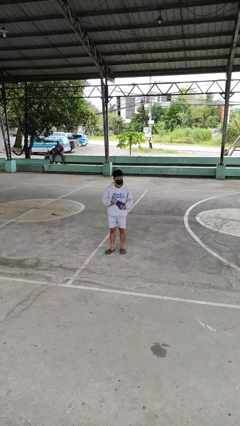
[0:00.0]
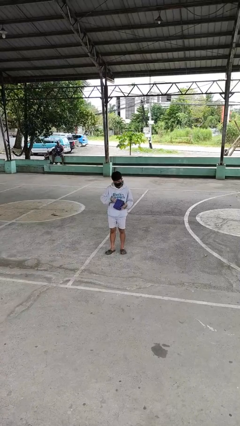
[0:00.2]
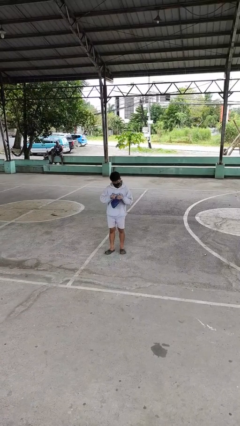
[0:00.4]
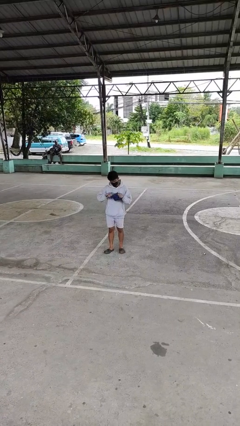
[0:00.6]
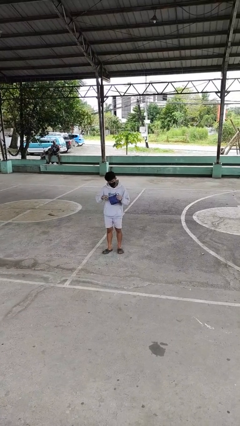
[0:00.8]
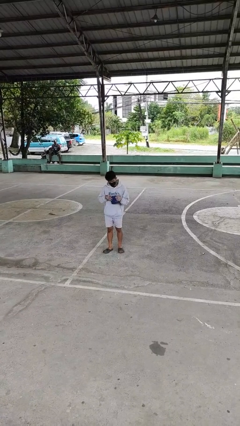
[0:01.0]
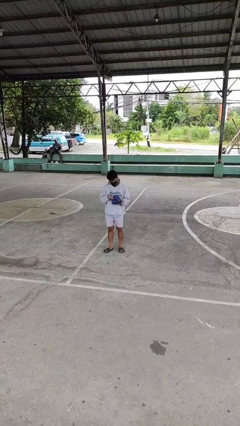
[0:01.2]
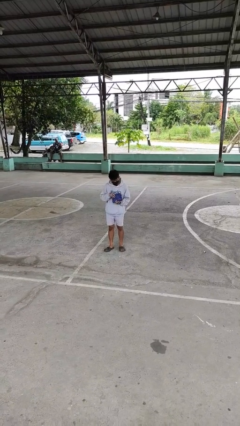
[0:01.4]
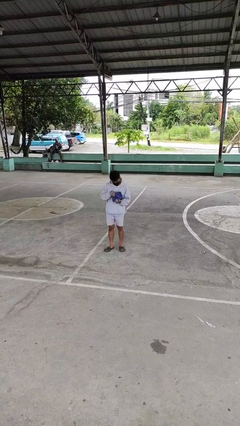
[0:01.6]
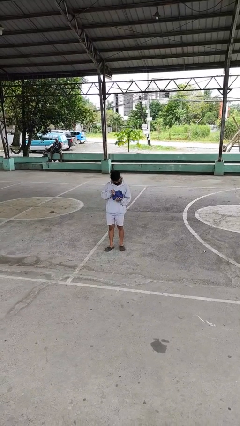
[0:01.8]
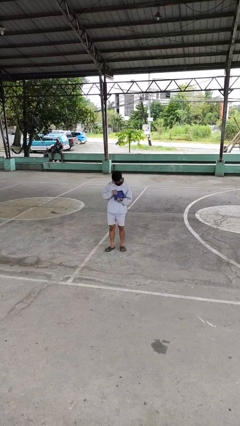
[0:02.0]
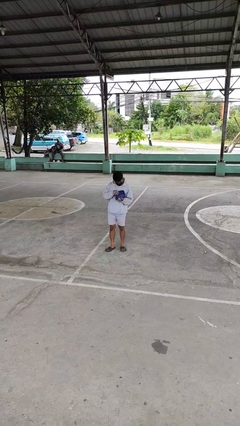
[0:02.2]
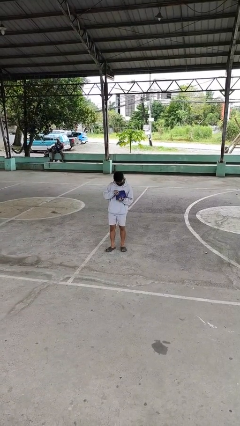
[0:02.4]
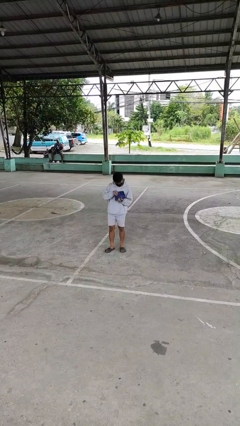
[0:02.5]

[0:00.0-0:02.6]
person searches in purse

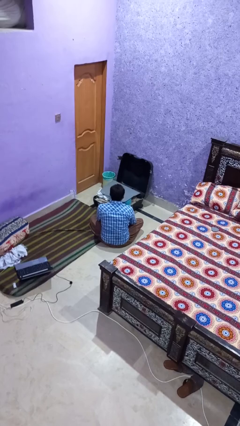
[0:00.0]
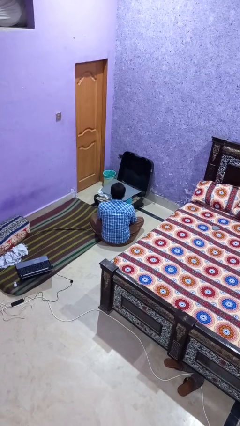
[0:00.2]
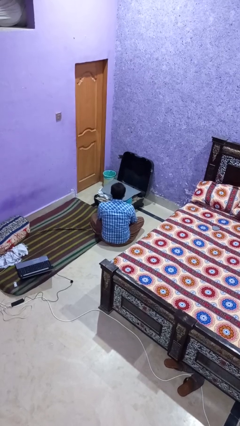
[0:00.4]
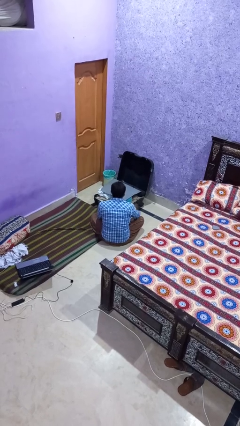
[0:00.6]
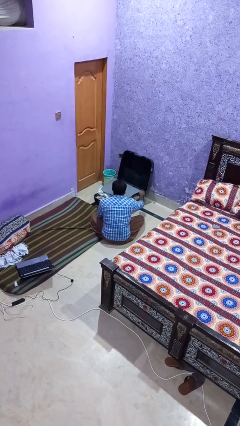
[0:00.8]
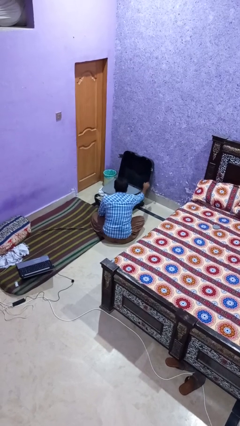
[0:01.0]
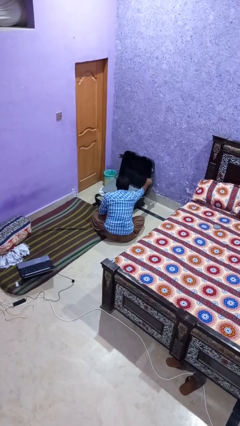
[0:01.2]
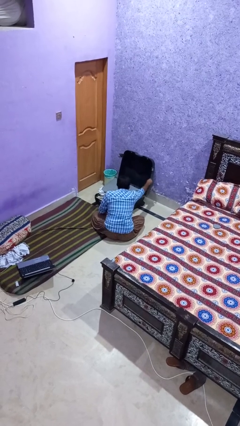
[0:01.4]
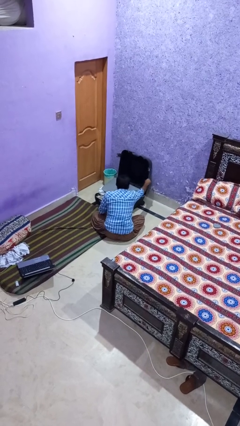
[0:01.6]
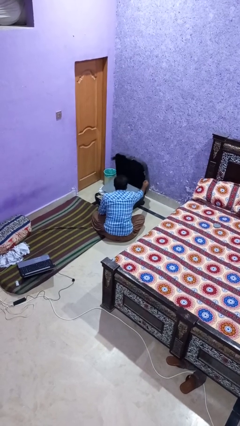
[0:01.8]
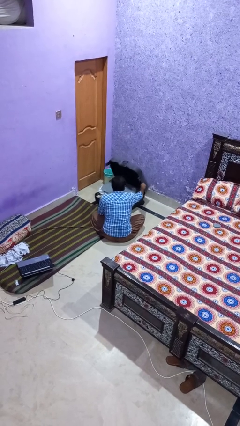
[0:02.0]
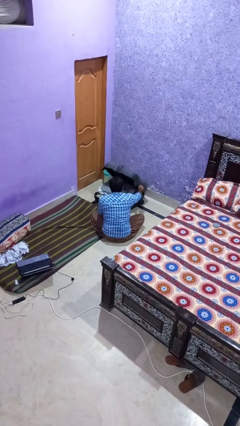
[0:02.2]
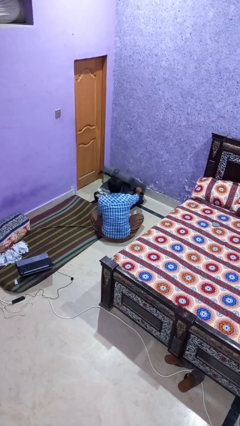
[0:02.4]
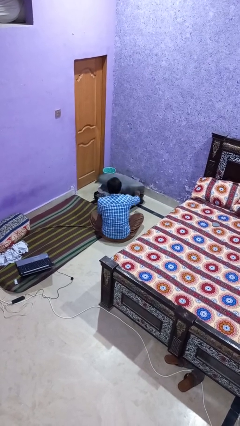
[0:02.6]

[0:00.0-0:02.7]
person closes suitcase

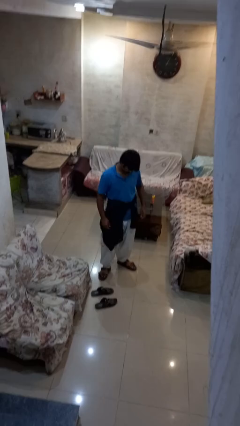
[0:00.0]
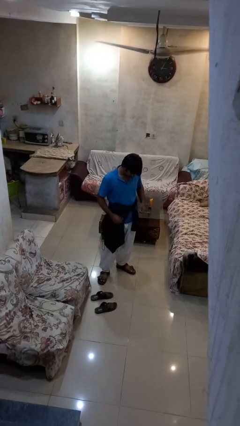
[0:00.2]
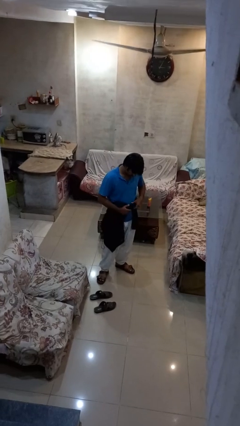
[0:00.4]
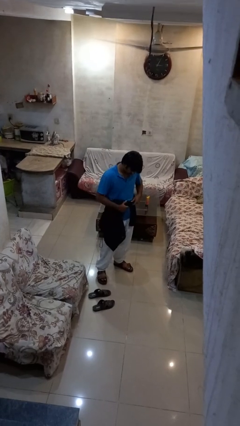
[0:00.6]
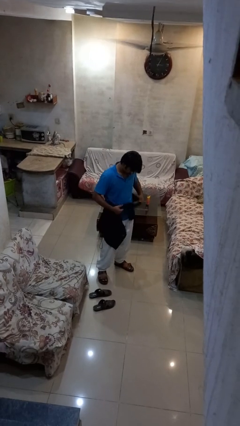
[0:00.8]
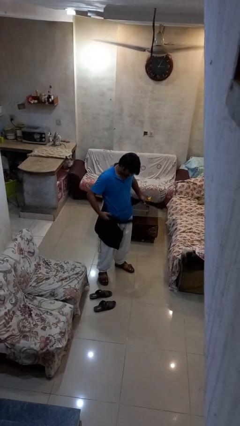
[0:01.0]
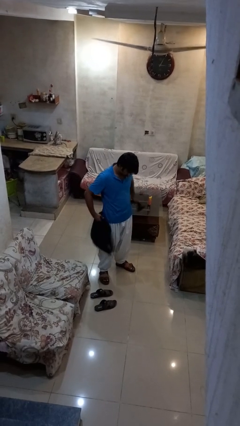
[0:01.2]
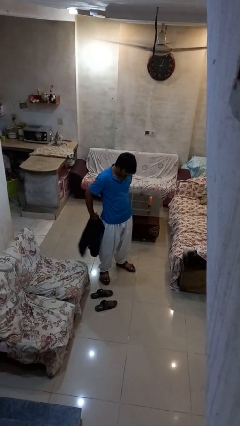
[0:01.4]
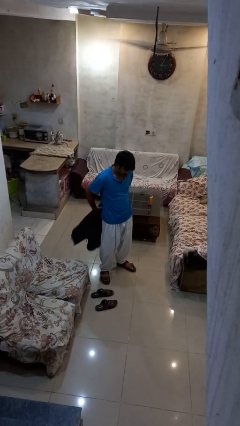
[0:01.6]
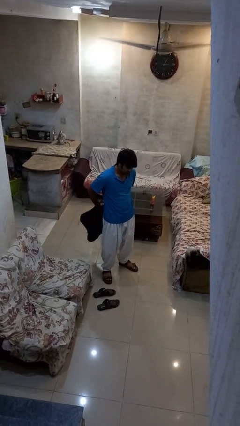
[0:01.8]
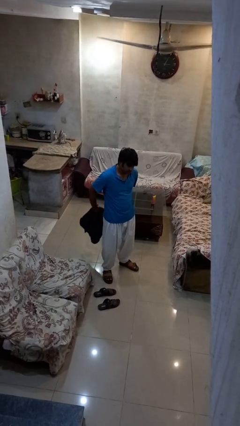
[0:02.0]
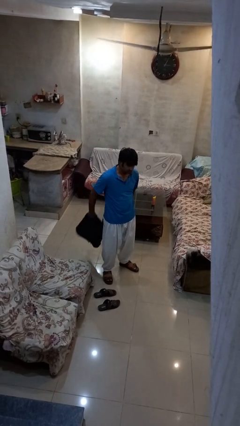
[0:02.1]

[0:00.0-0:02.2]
person unties jacket around waist

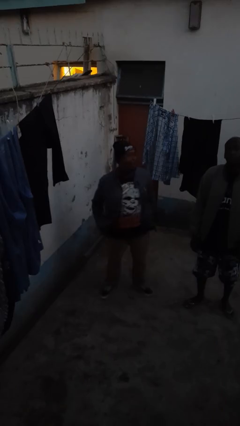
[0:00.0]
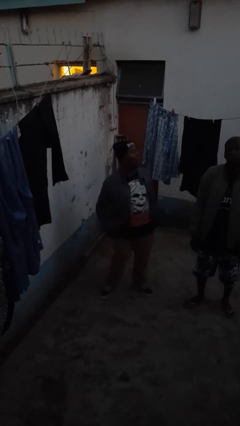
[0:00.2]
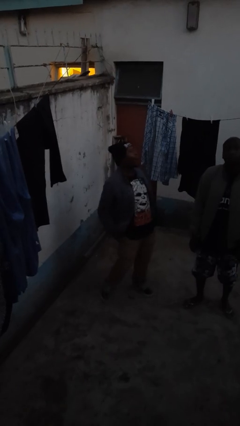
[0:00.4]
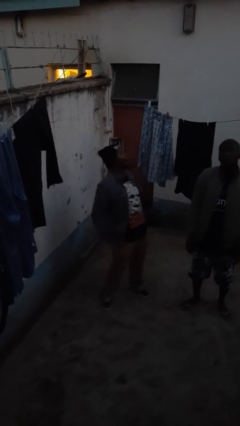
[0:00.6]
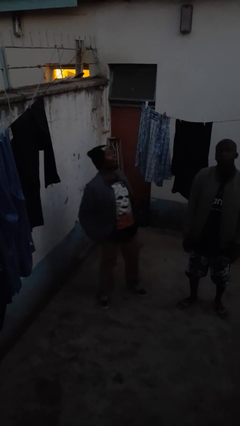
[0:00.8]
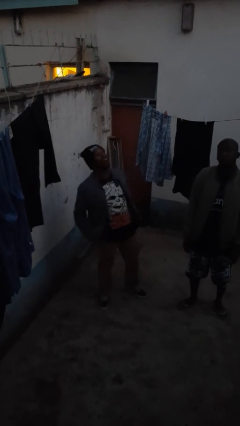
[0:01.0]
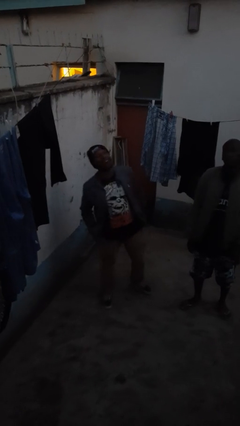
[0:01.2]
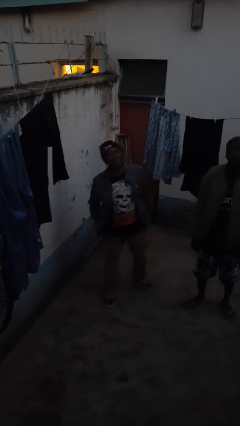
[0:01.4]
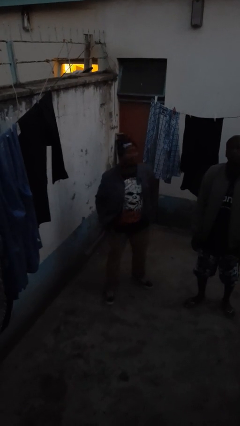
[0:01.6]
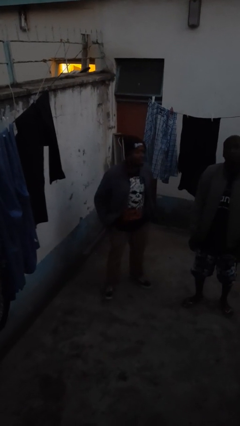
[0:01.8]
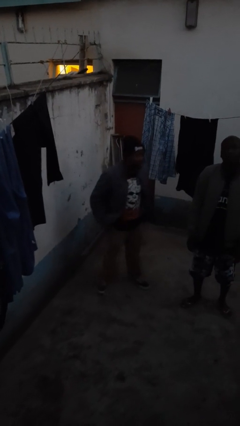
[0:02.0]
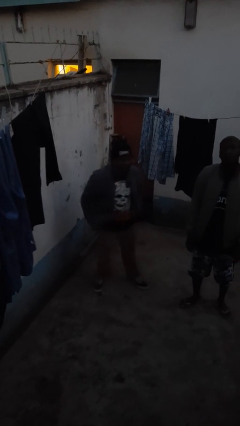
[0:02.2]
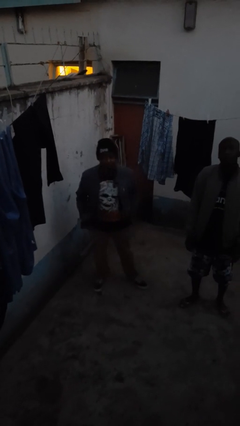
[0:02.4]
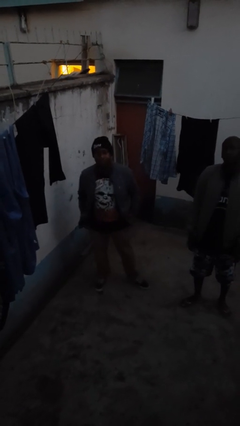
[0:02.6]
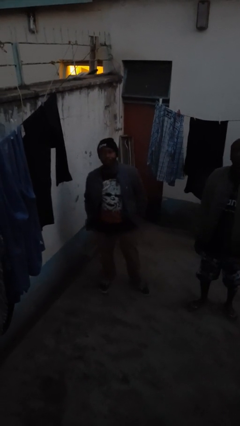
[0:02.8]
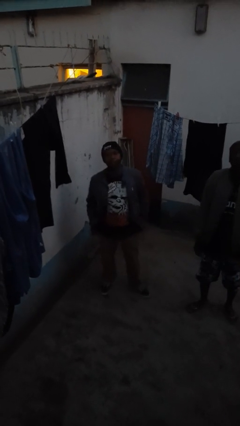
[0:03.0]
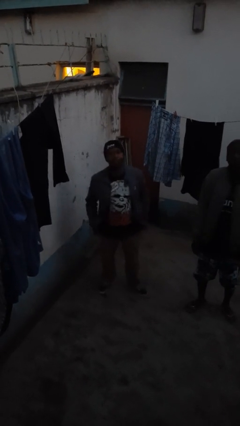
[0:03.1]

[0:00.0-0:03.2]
person laughs with person

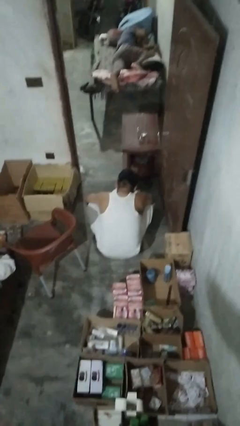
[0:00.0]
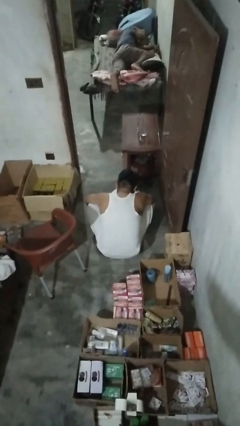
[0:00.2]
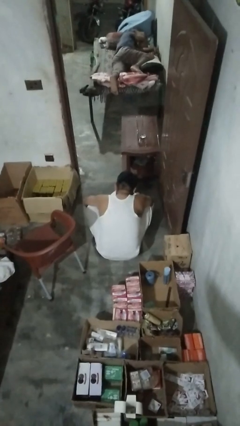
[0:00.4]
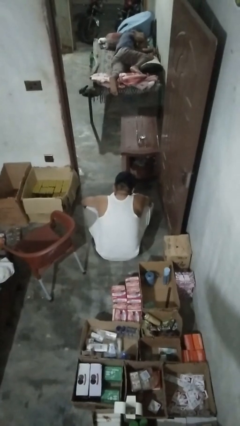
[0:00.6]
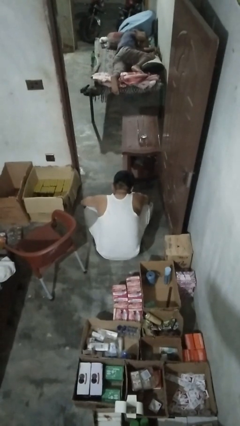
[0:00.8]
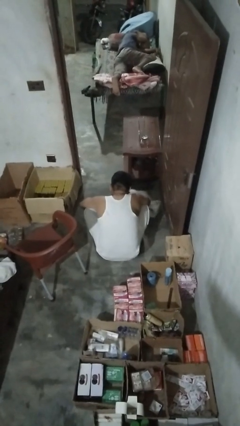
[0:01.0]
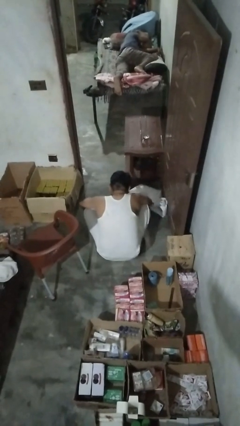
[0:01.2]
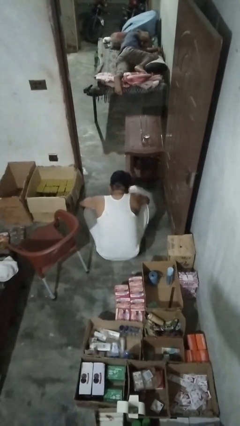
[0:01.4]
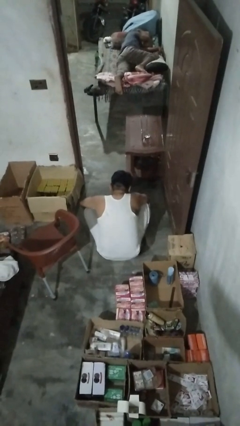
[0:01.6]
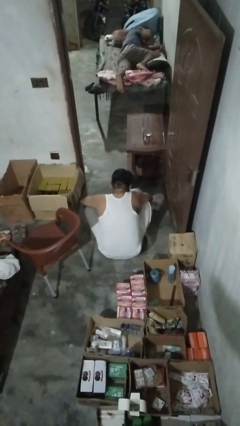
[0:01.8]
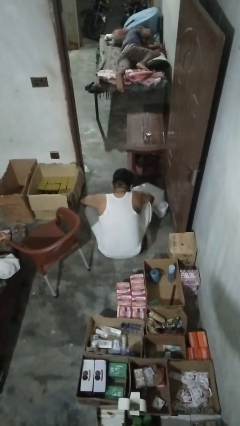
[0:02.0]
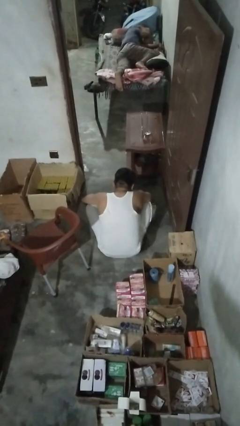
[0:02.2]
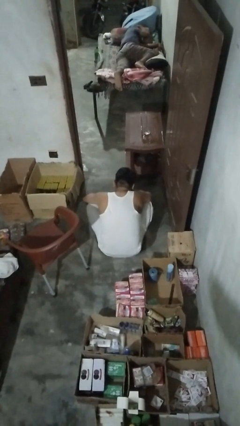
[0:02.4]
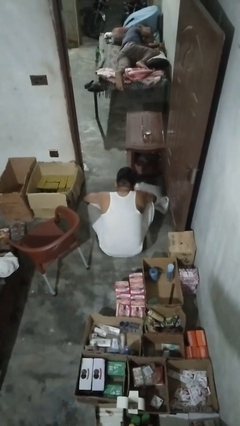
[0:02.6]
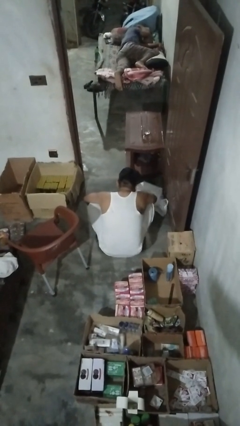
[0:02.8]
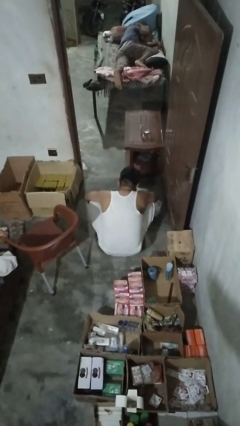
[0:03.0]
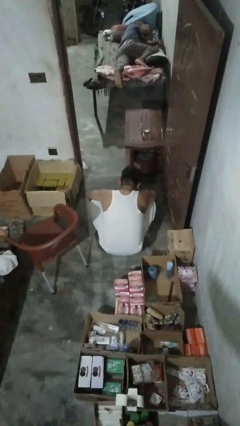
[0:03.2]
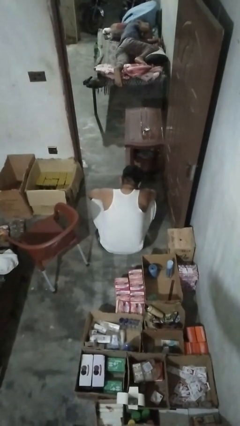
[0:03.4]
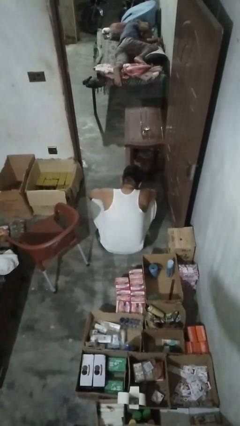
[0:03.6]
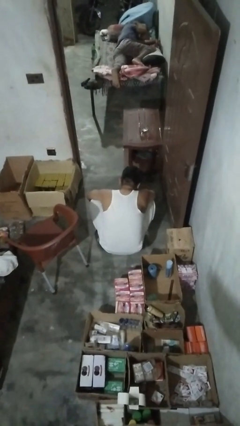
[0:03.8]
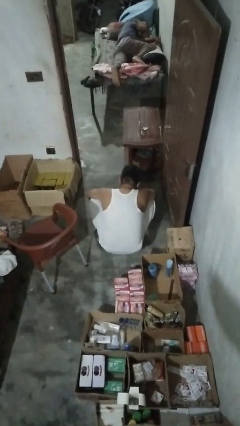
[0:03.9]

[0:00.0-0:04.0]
person mops

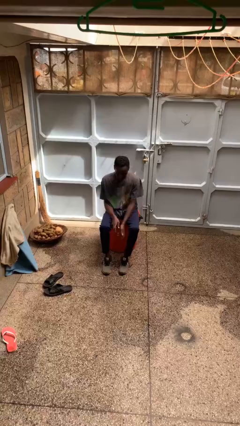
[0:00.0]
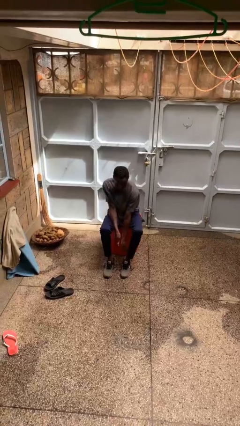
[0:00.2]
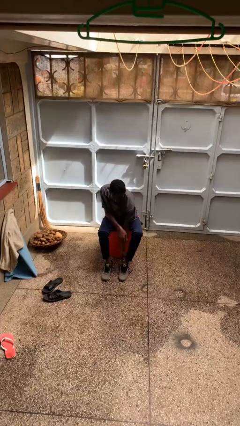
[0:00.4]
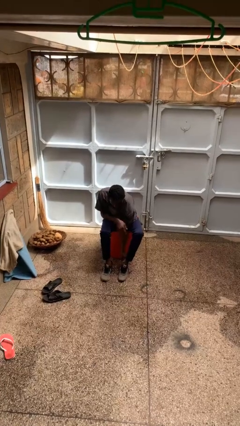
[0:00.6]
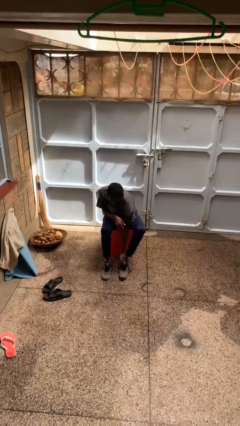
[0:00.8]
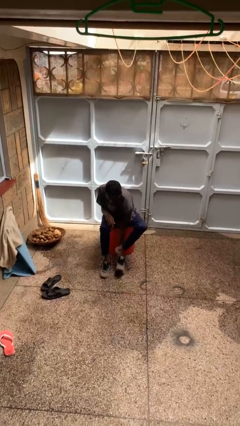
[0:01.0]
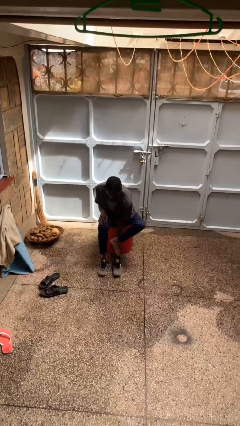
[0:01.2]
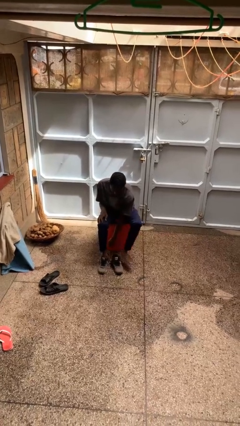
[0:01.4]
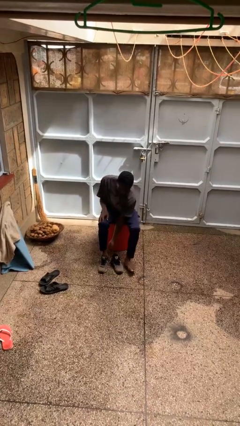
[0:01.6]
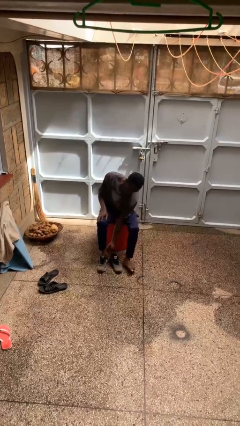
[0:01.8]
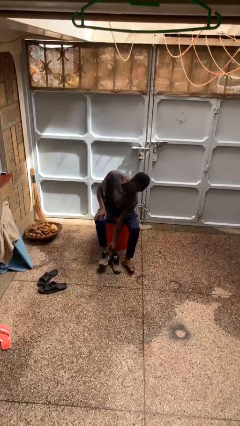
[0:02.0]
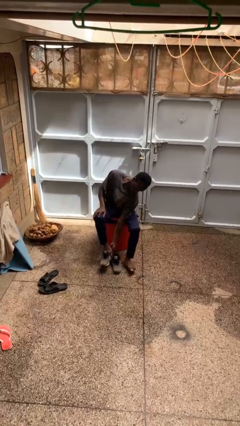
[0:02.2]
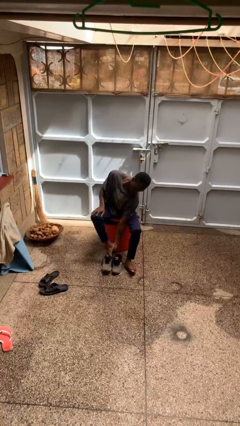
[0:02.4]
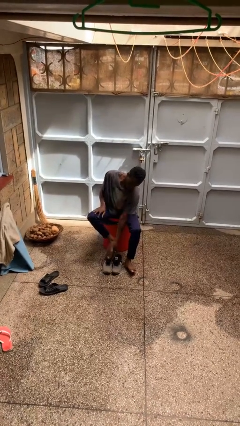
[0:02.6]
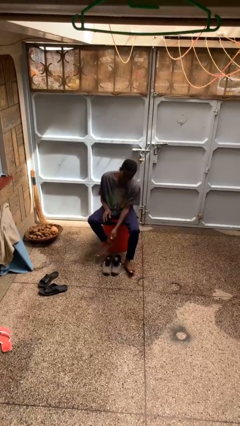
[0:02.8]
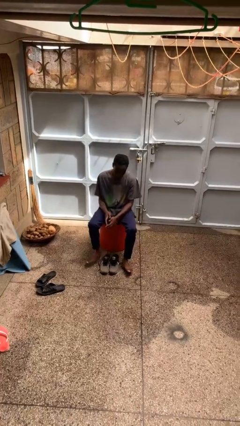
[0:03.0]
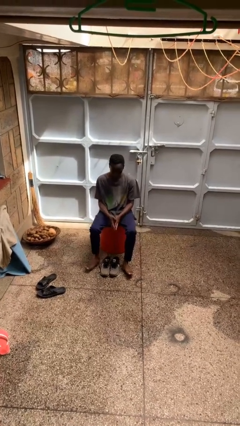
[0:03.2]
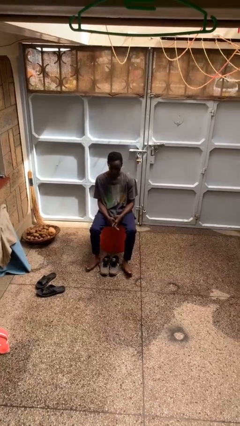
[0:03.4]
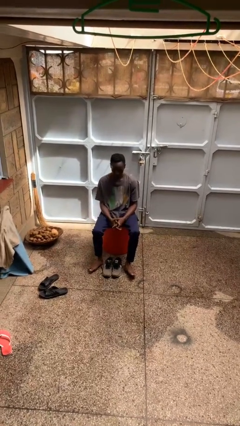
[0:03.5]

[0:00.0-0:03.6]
person takes off shoes
